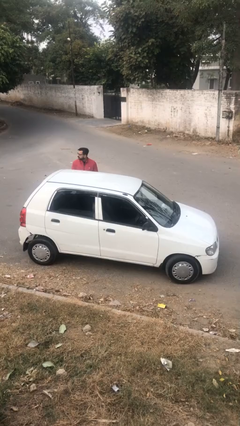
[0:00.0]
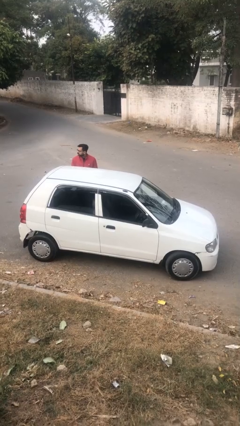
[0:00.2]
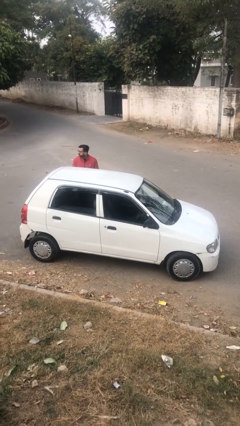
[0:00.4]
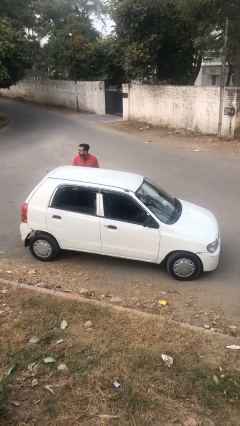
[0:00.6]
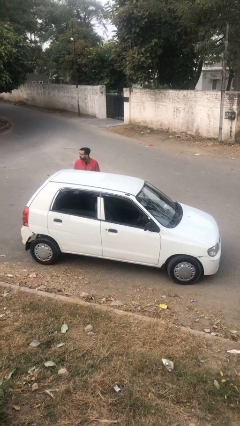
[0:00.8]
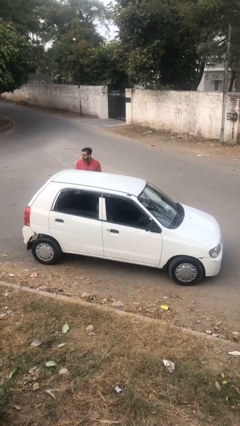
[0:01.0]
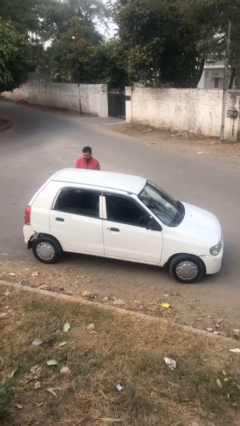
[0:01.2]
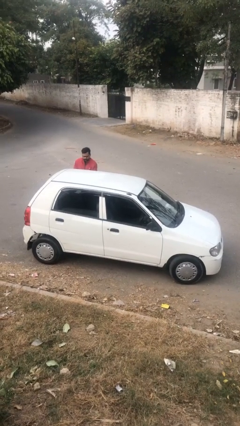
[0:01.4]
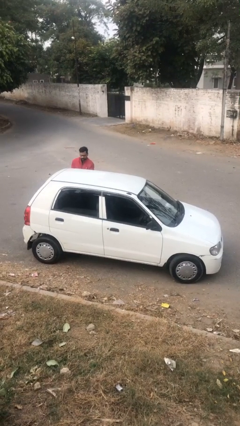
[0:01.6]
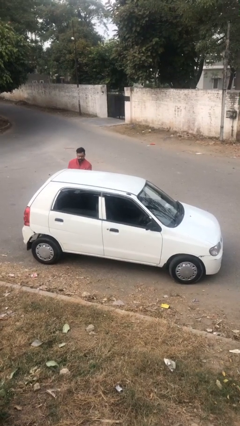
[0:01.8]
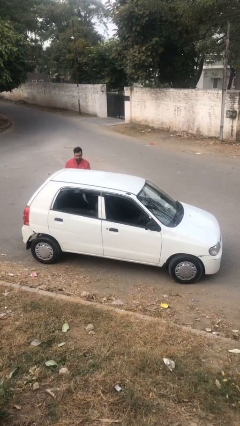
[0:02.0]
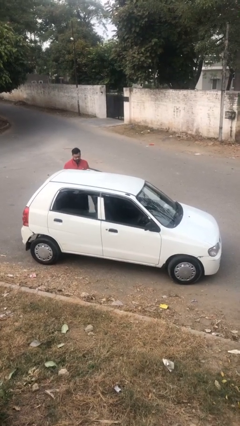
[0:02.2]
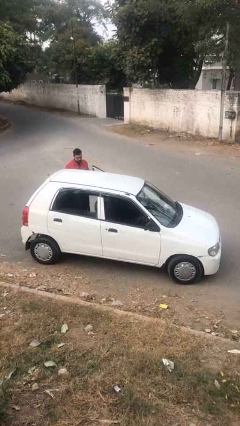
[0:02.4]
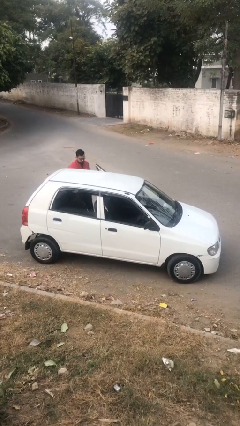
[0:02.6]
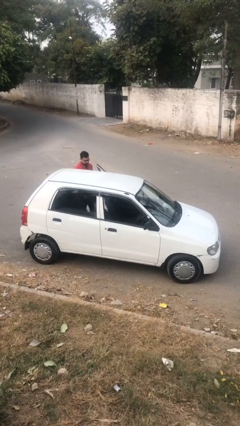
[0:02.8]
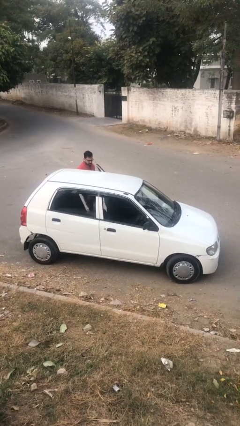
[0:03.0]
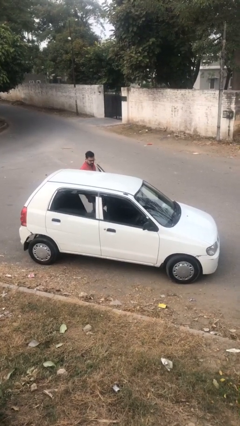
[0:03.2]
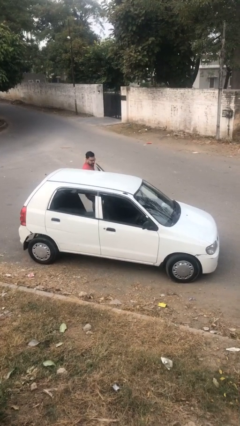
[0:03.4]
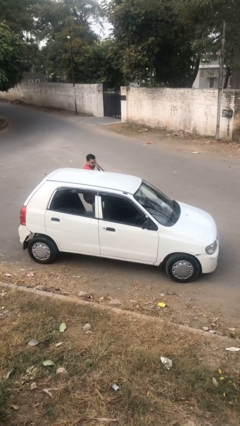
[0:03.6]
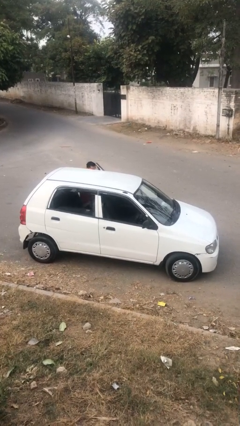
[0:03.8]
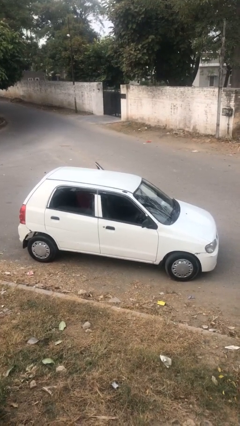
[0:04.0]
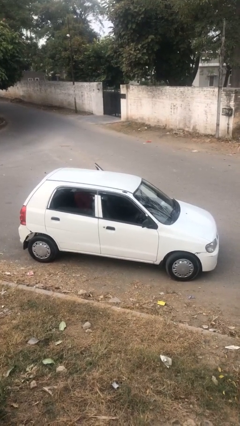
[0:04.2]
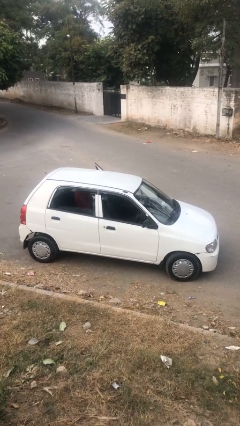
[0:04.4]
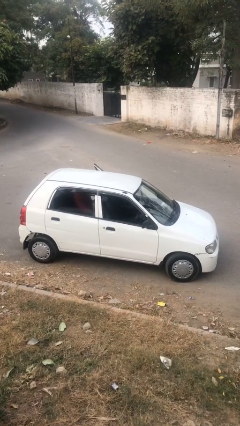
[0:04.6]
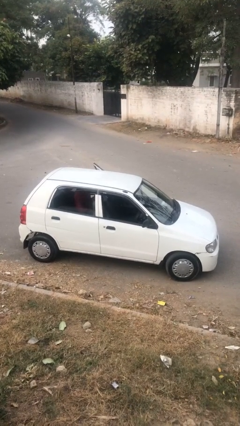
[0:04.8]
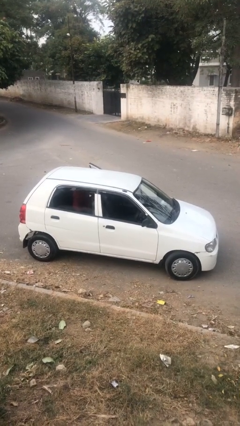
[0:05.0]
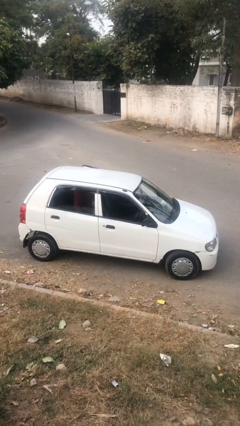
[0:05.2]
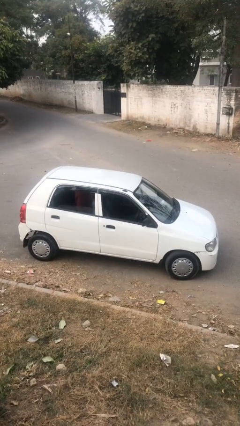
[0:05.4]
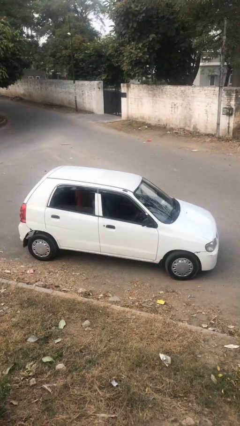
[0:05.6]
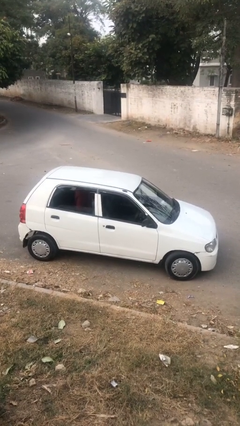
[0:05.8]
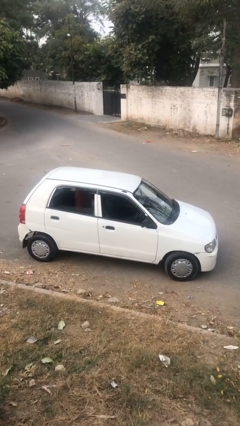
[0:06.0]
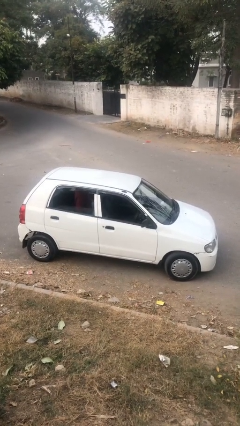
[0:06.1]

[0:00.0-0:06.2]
car picks up person

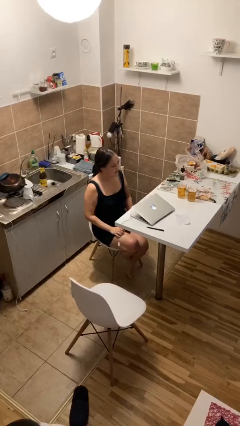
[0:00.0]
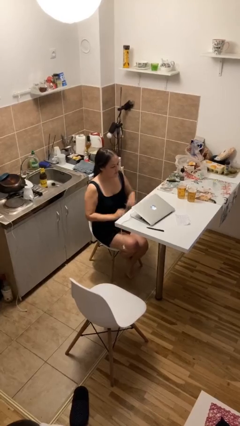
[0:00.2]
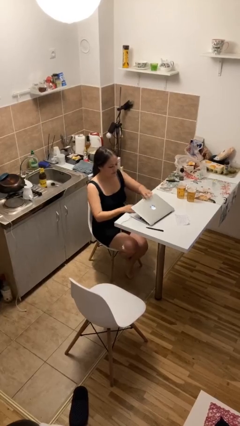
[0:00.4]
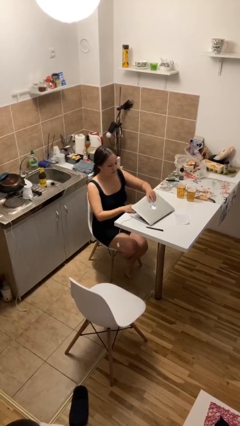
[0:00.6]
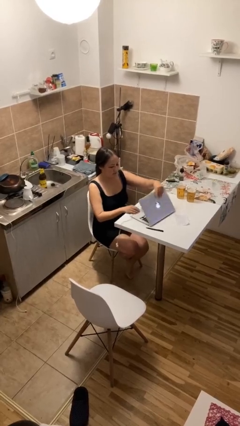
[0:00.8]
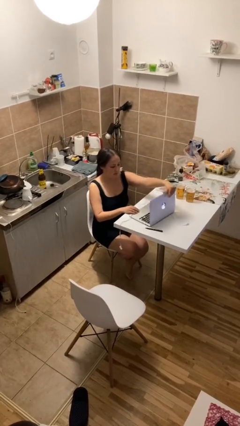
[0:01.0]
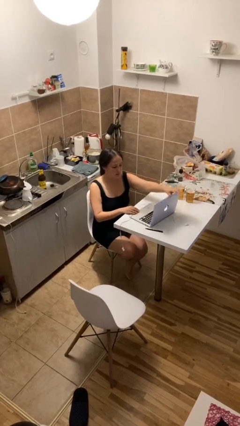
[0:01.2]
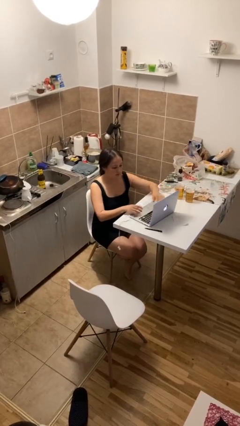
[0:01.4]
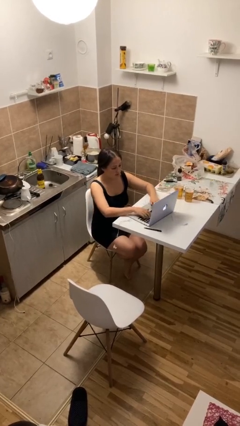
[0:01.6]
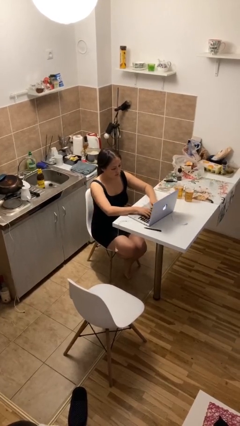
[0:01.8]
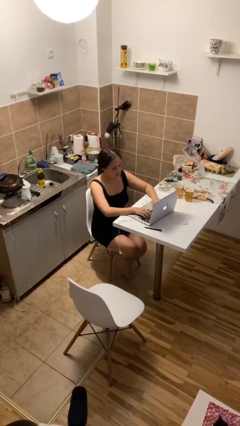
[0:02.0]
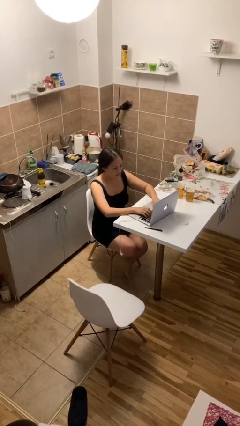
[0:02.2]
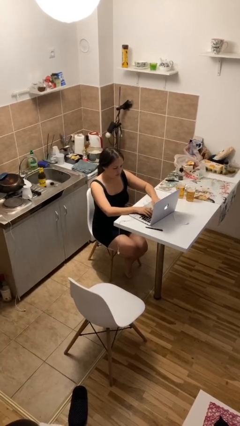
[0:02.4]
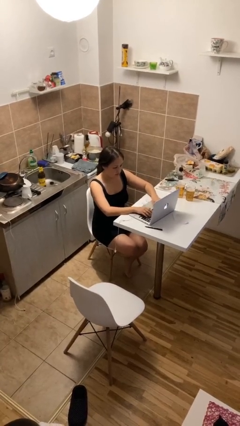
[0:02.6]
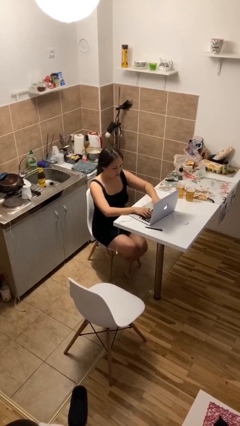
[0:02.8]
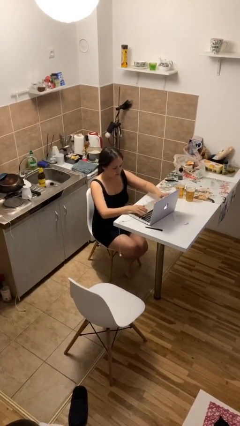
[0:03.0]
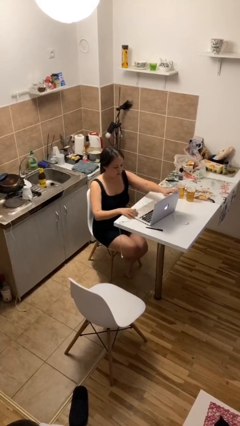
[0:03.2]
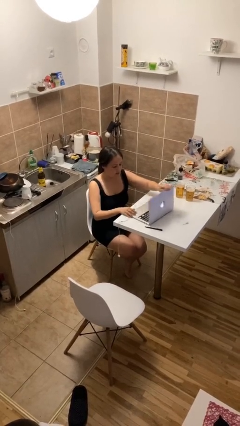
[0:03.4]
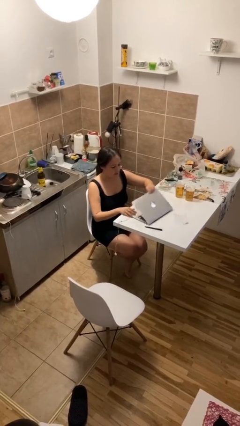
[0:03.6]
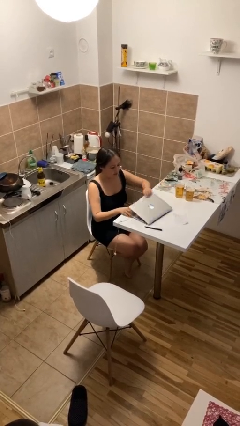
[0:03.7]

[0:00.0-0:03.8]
person interacts with laptop

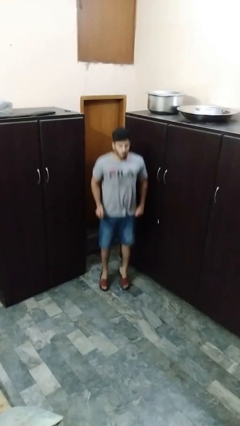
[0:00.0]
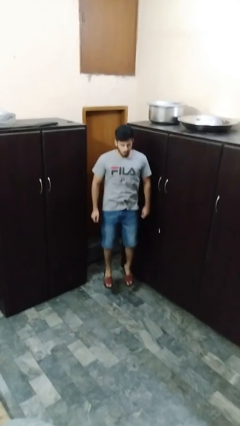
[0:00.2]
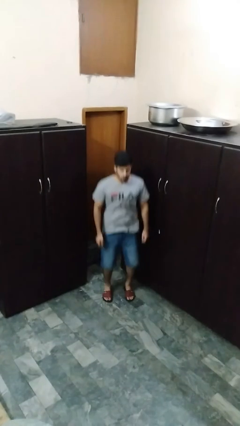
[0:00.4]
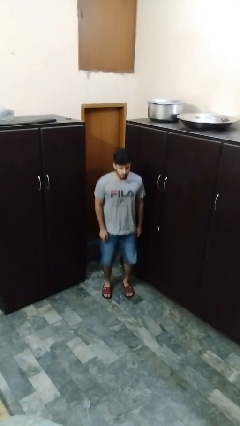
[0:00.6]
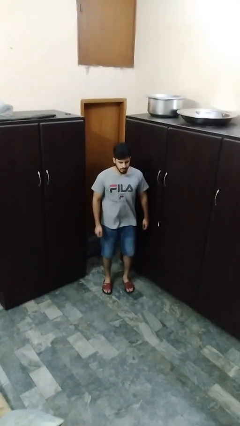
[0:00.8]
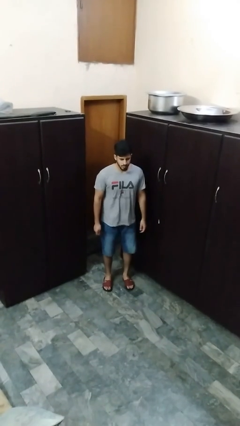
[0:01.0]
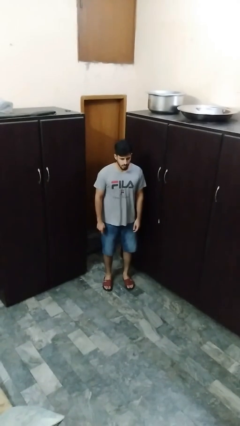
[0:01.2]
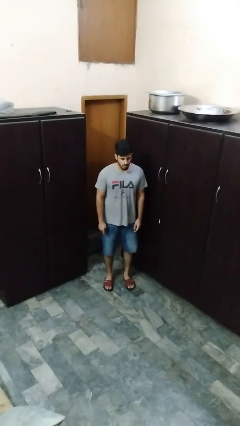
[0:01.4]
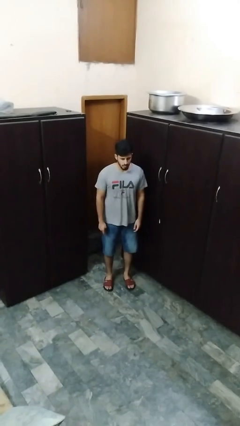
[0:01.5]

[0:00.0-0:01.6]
person jumps

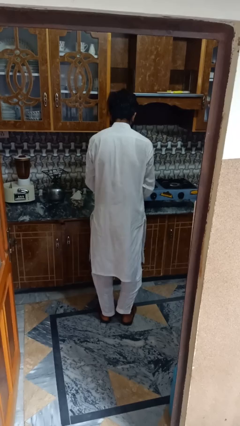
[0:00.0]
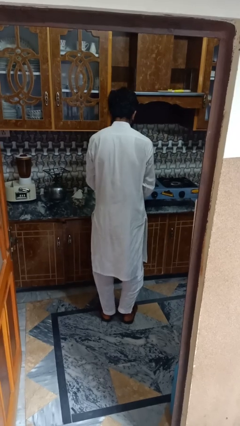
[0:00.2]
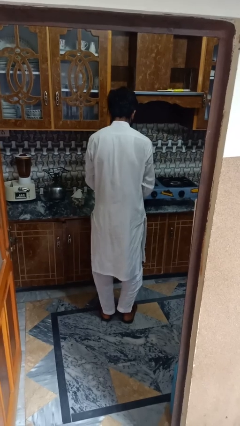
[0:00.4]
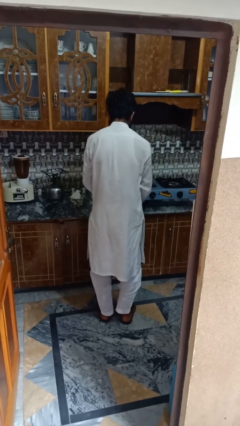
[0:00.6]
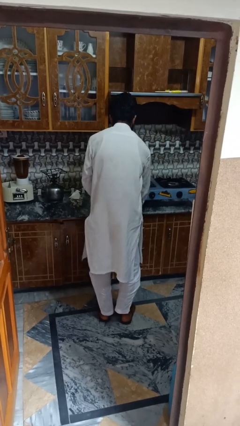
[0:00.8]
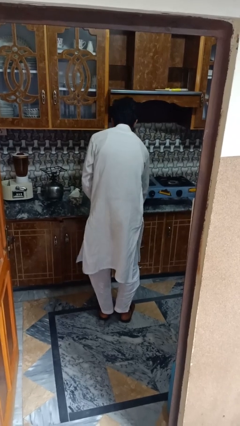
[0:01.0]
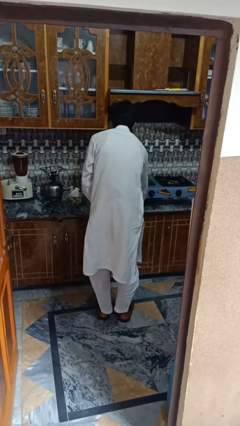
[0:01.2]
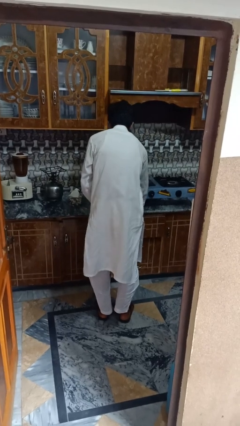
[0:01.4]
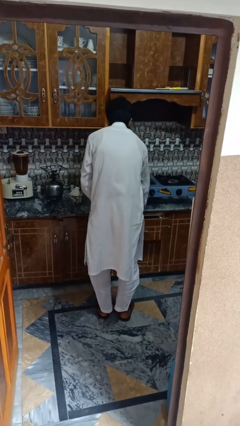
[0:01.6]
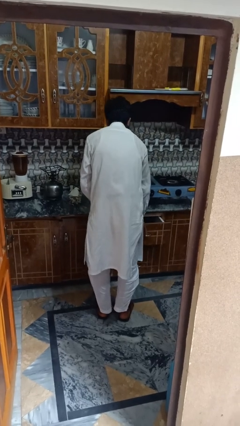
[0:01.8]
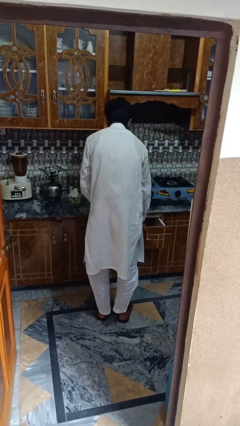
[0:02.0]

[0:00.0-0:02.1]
person opens kitchen drawer

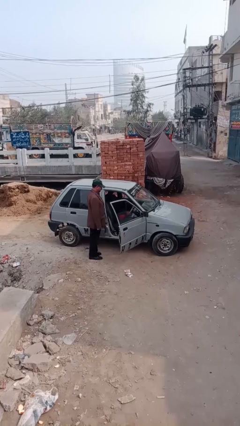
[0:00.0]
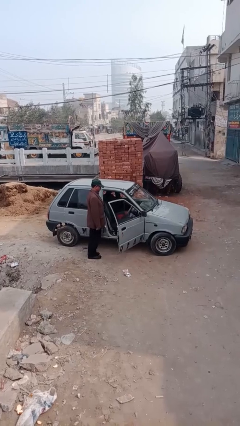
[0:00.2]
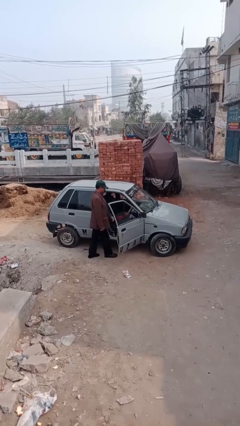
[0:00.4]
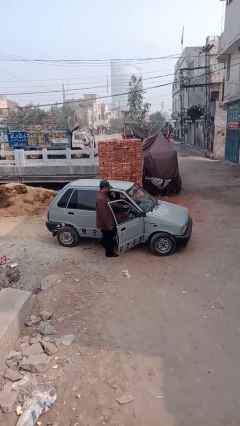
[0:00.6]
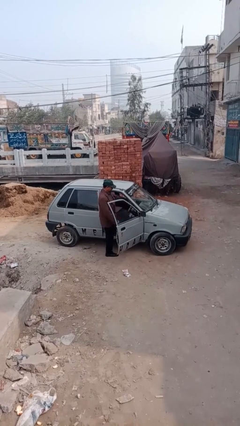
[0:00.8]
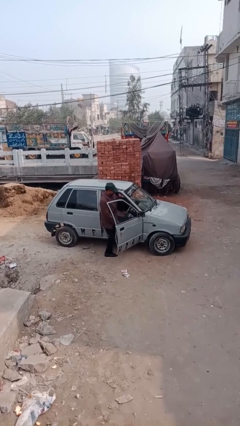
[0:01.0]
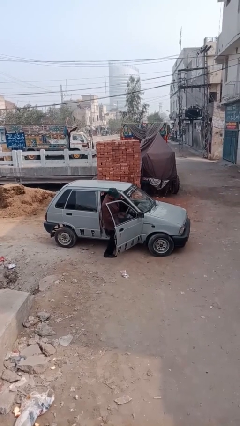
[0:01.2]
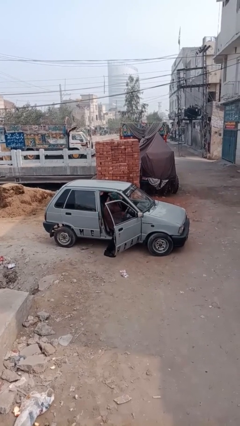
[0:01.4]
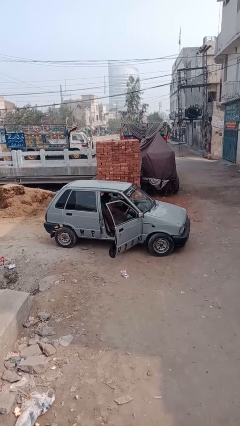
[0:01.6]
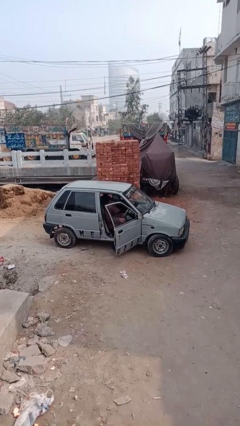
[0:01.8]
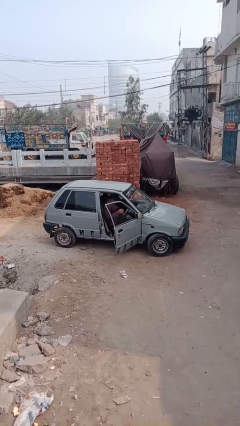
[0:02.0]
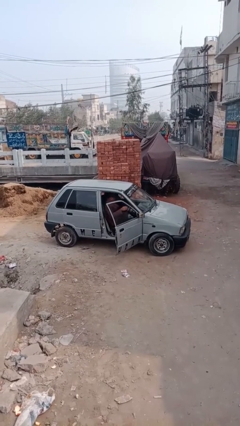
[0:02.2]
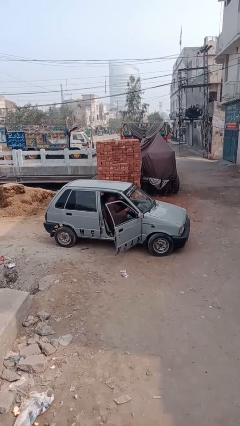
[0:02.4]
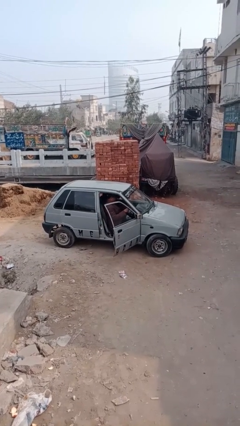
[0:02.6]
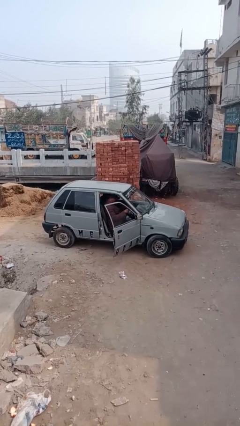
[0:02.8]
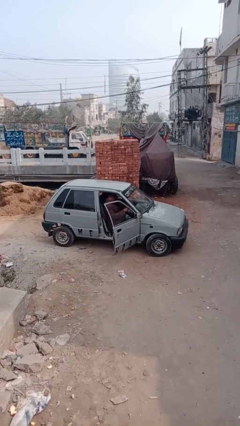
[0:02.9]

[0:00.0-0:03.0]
person enters car

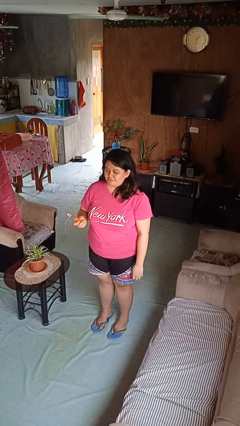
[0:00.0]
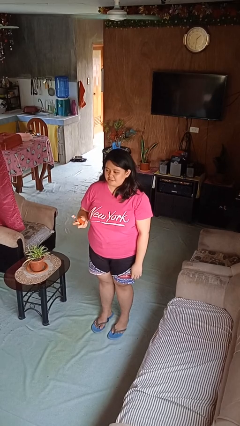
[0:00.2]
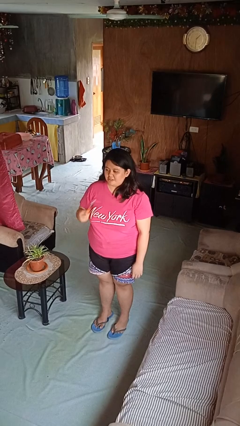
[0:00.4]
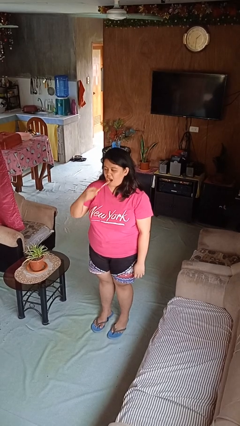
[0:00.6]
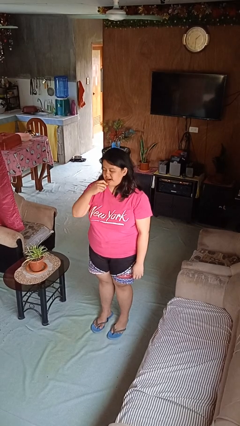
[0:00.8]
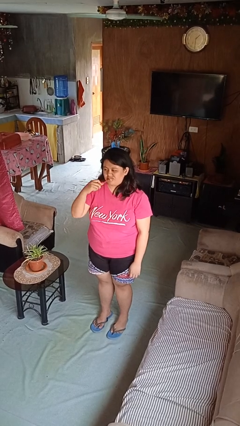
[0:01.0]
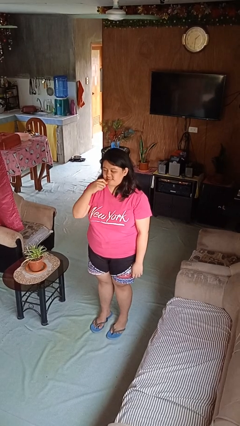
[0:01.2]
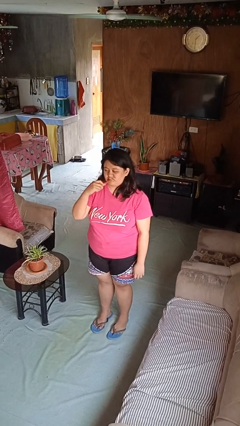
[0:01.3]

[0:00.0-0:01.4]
person brushes teeth
